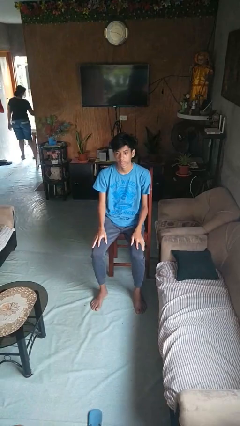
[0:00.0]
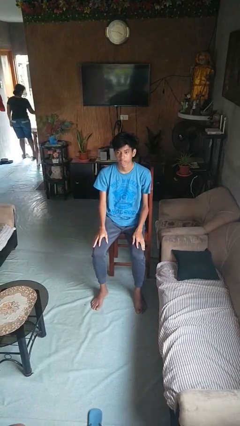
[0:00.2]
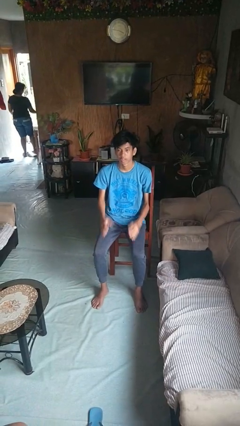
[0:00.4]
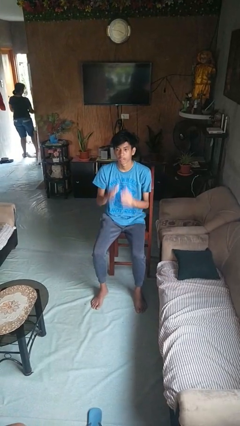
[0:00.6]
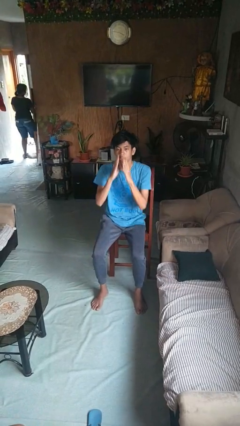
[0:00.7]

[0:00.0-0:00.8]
person sneezes into hand

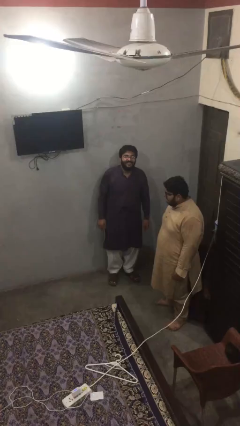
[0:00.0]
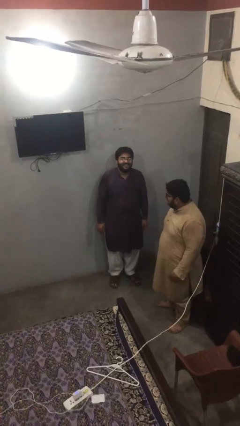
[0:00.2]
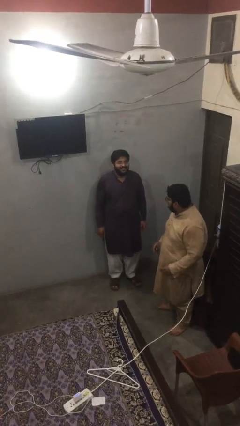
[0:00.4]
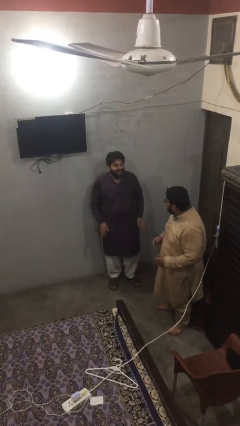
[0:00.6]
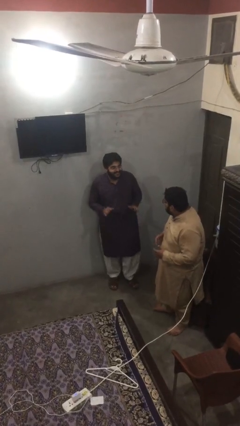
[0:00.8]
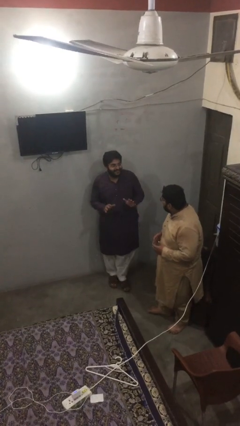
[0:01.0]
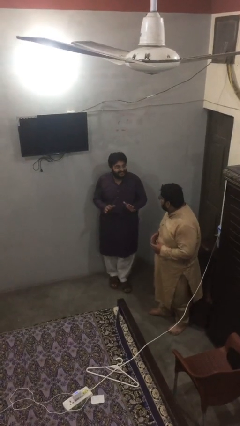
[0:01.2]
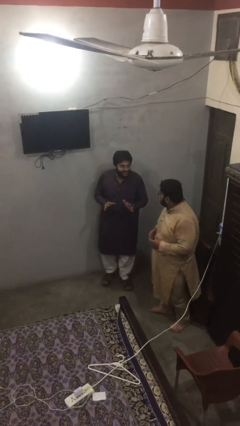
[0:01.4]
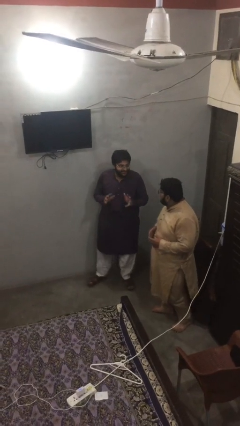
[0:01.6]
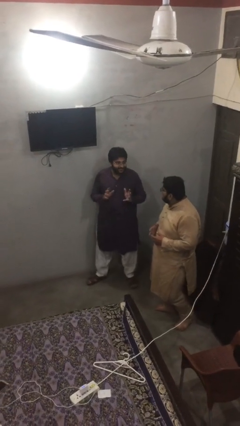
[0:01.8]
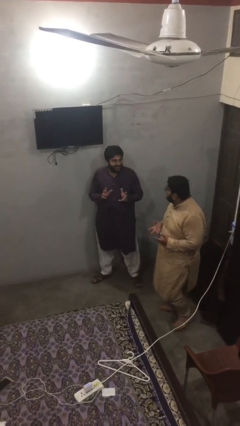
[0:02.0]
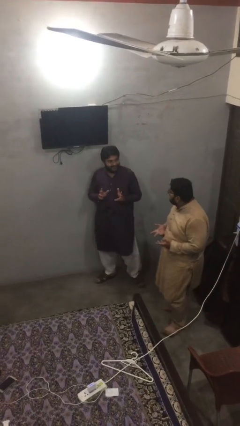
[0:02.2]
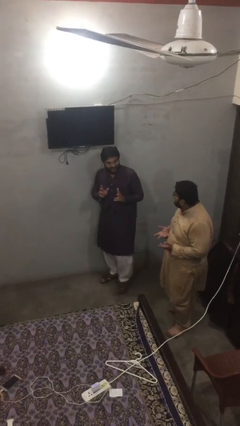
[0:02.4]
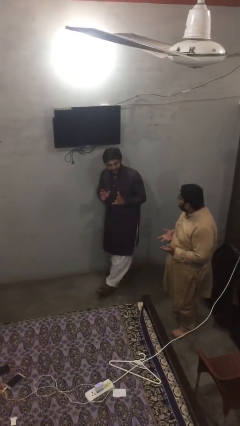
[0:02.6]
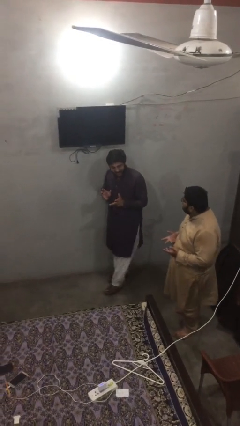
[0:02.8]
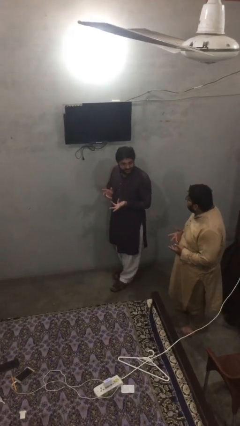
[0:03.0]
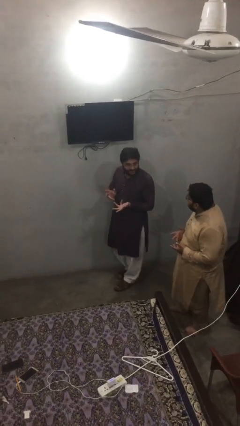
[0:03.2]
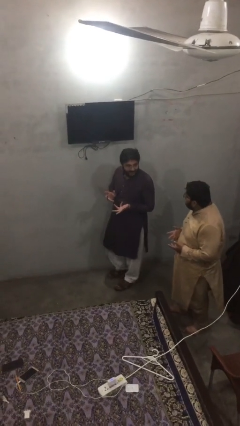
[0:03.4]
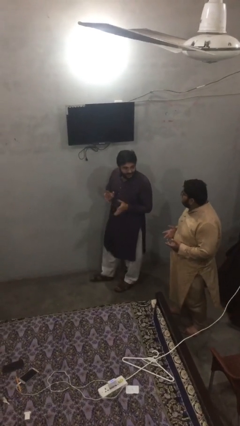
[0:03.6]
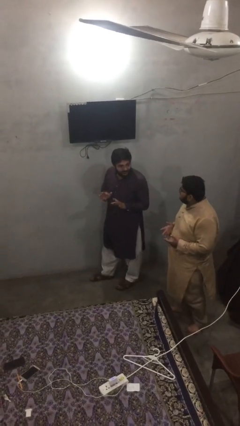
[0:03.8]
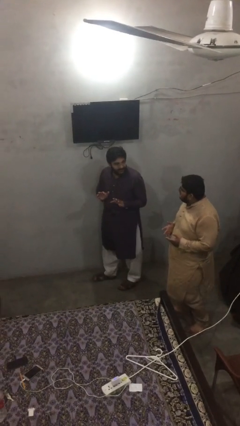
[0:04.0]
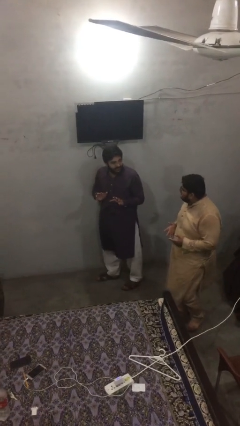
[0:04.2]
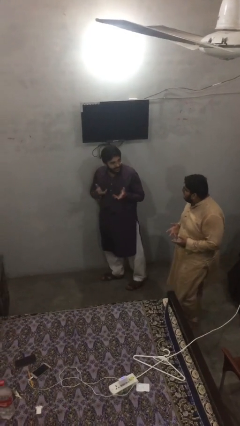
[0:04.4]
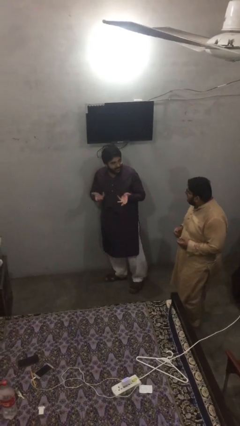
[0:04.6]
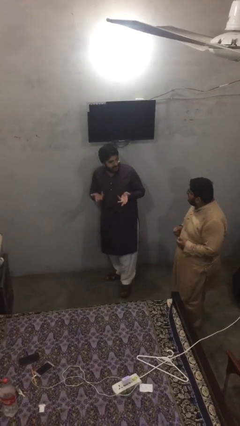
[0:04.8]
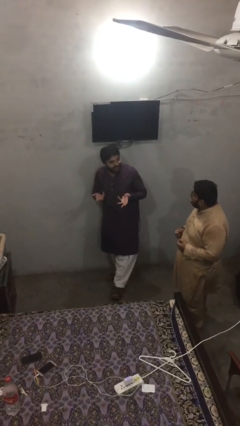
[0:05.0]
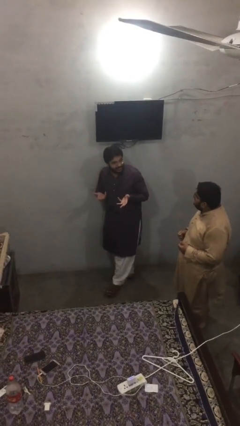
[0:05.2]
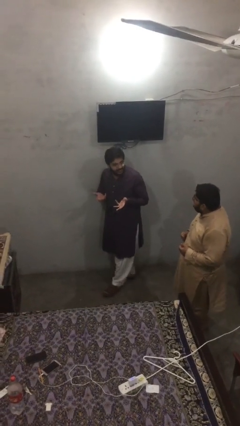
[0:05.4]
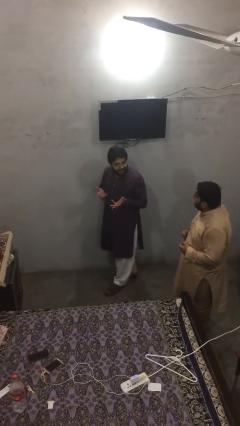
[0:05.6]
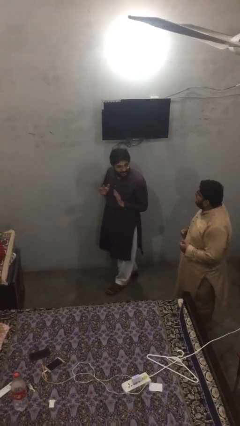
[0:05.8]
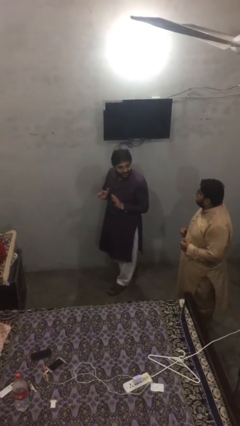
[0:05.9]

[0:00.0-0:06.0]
person talks to person

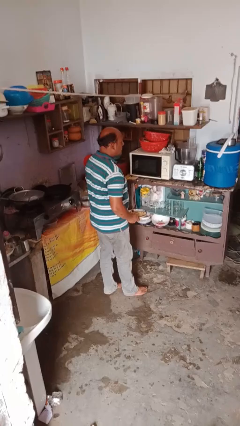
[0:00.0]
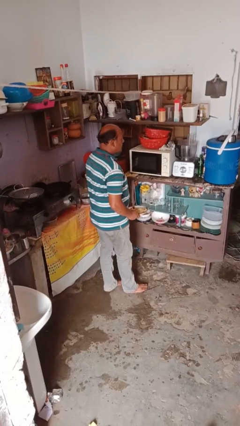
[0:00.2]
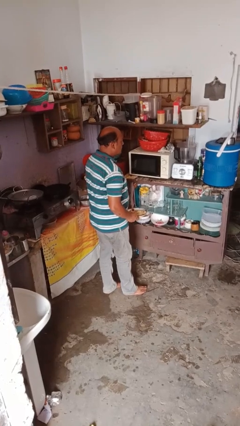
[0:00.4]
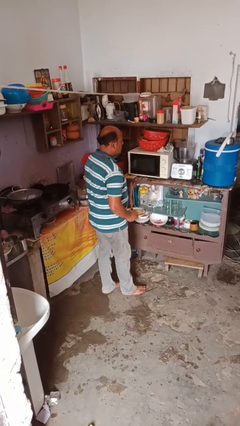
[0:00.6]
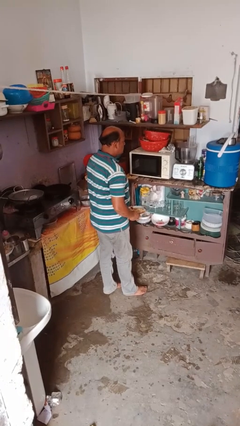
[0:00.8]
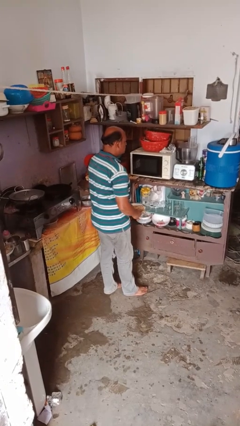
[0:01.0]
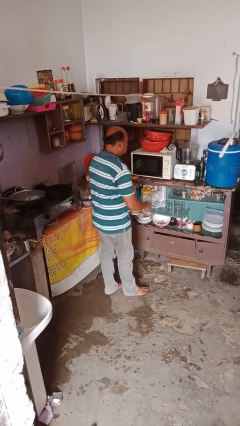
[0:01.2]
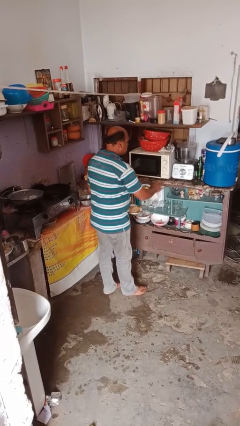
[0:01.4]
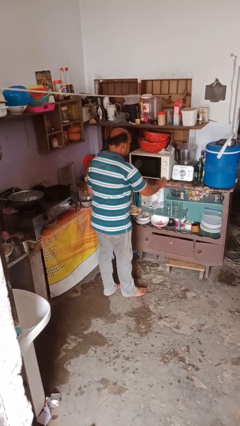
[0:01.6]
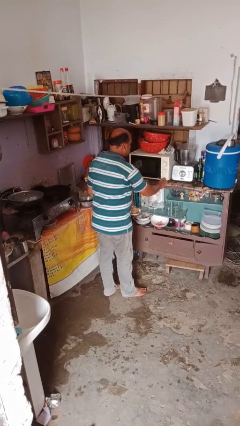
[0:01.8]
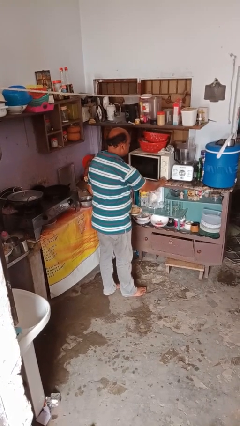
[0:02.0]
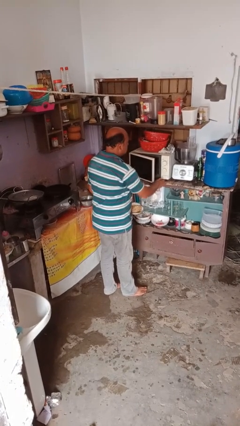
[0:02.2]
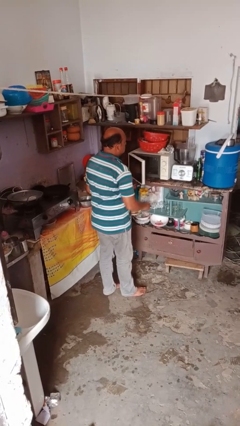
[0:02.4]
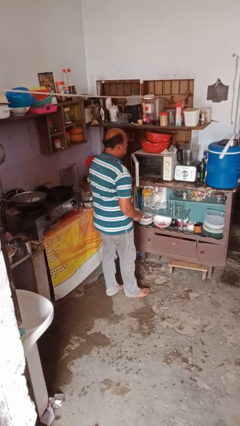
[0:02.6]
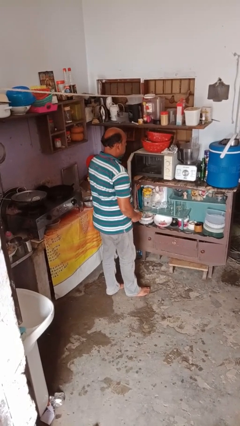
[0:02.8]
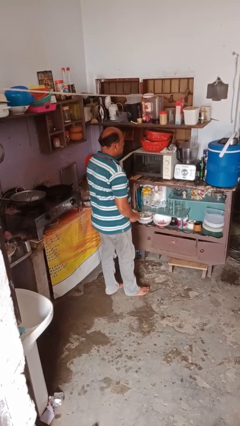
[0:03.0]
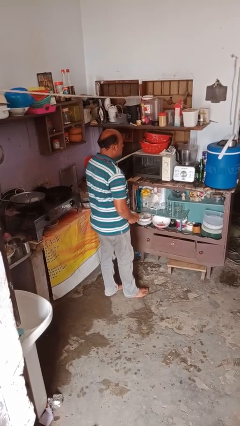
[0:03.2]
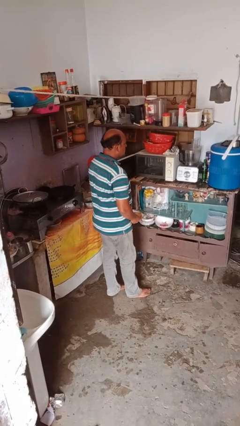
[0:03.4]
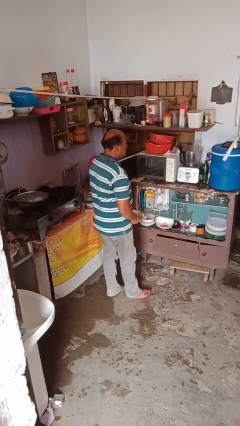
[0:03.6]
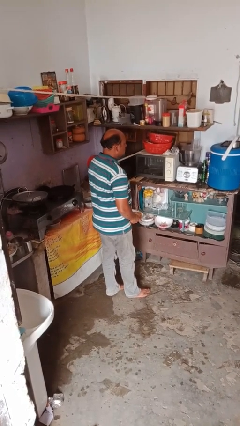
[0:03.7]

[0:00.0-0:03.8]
person opens microwave

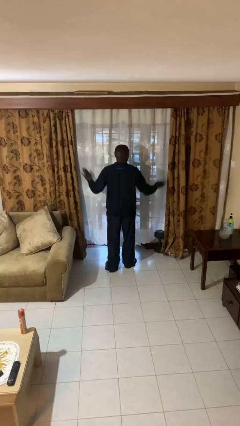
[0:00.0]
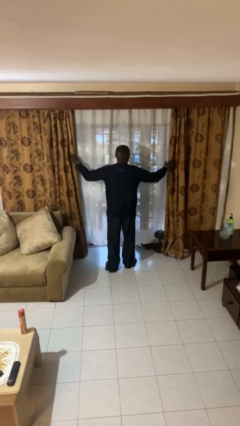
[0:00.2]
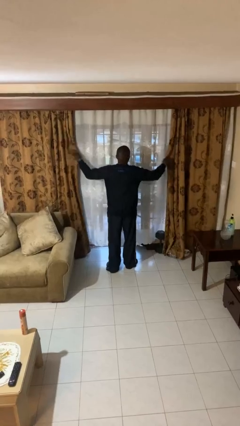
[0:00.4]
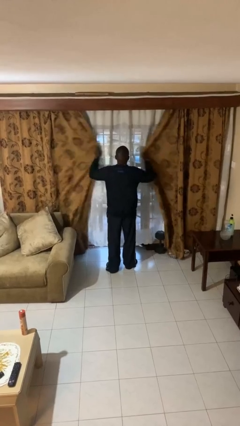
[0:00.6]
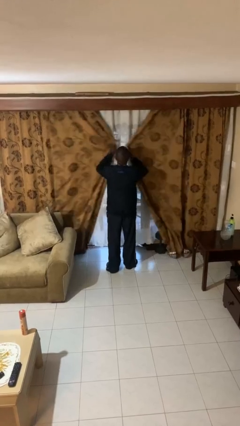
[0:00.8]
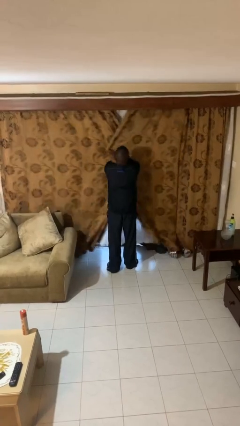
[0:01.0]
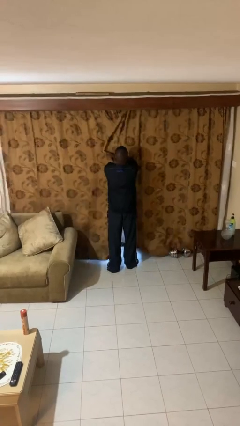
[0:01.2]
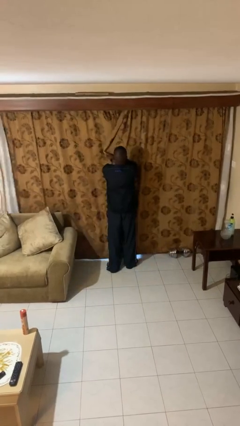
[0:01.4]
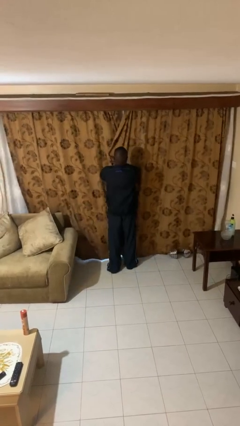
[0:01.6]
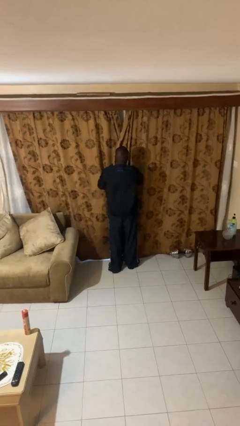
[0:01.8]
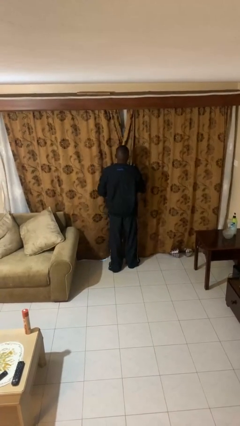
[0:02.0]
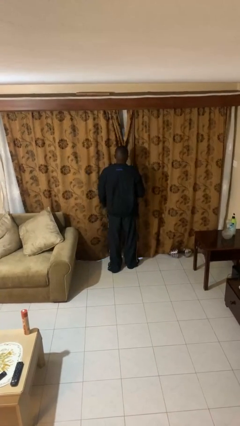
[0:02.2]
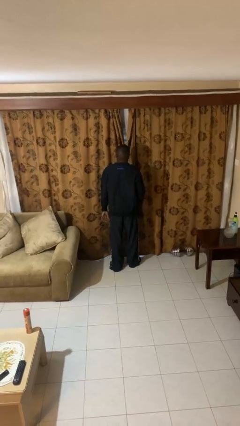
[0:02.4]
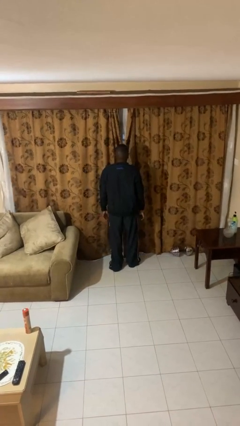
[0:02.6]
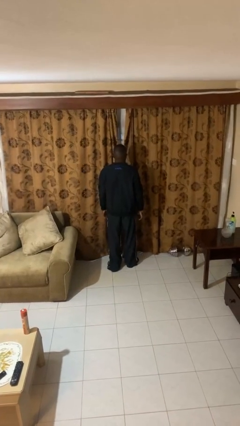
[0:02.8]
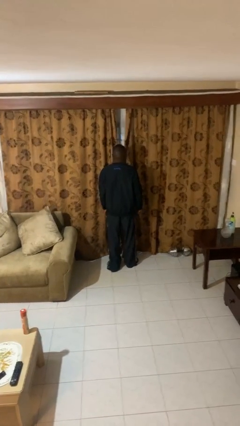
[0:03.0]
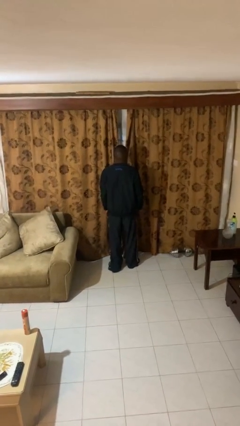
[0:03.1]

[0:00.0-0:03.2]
person closes curtains

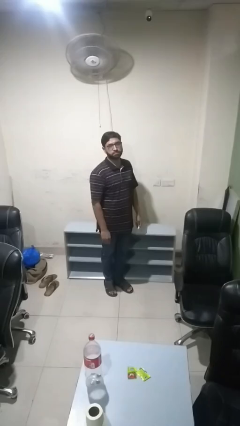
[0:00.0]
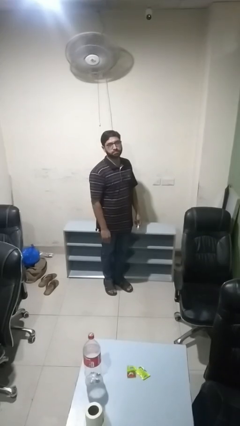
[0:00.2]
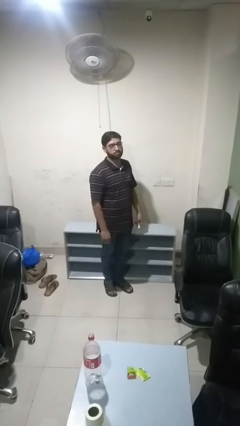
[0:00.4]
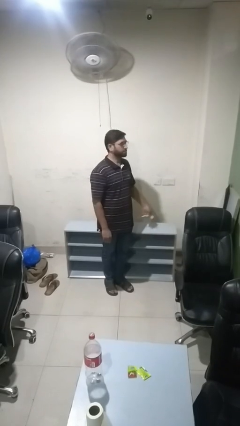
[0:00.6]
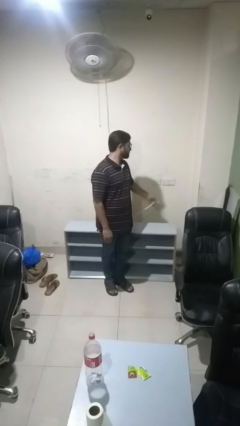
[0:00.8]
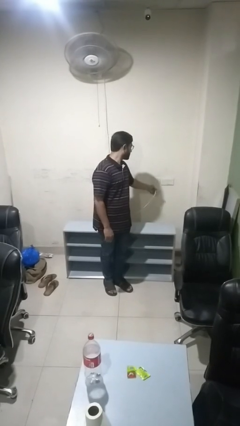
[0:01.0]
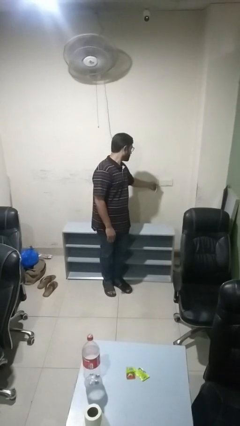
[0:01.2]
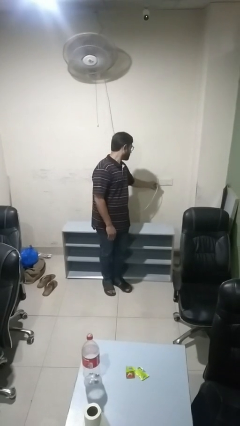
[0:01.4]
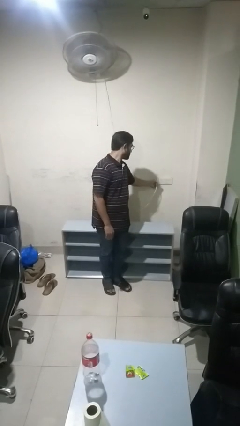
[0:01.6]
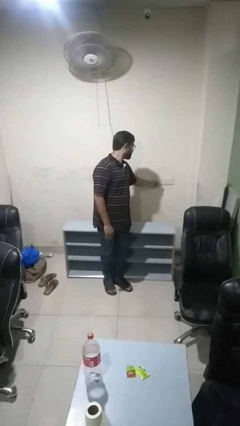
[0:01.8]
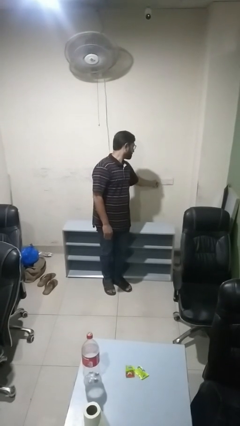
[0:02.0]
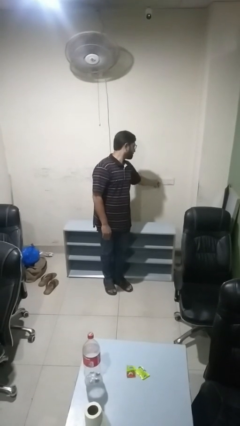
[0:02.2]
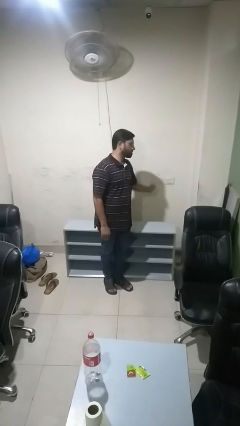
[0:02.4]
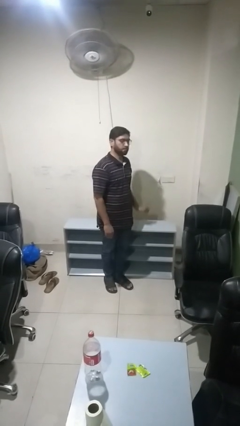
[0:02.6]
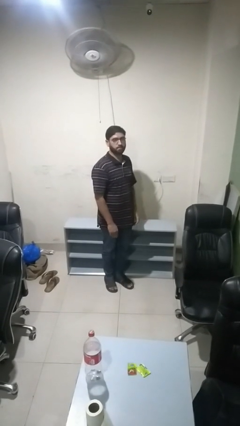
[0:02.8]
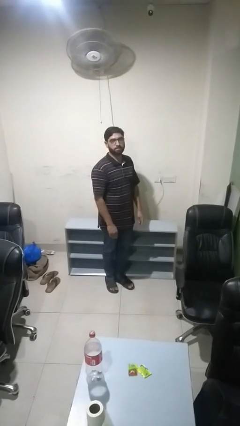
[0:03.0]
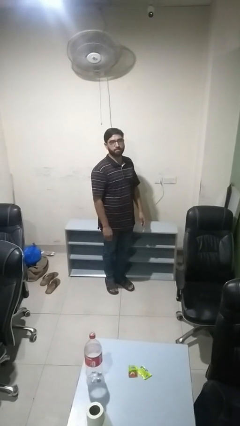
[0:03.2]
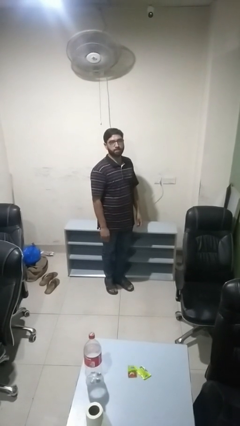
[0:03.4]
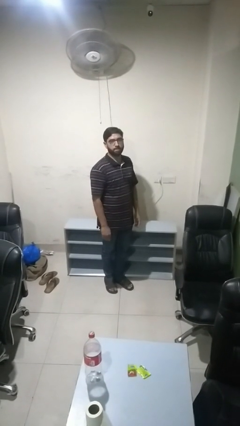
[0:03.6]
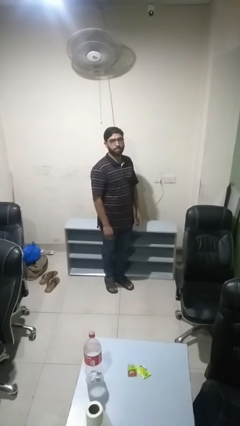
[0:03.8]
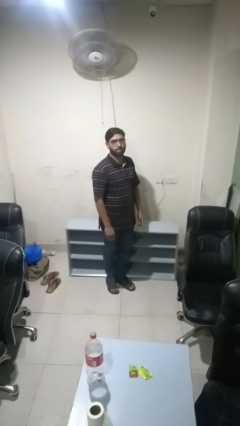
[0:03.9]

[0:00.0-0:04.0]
person plugs into electrical socket
